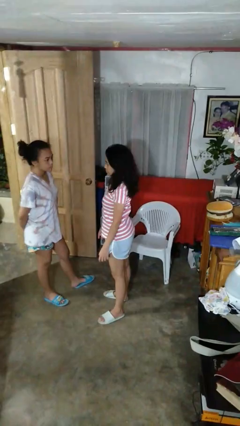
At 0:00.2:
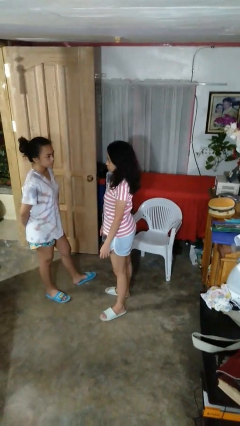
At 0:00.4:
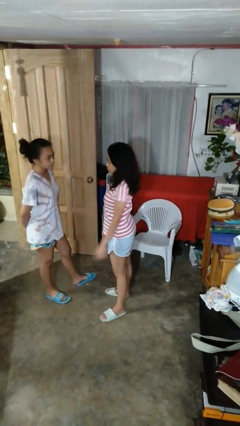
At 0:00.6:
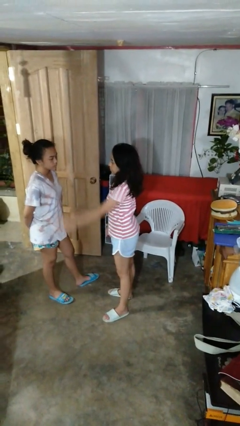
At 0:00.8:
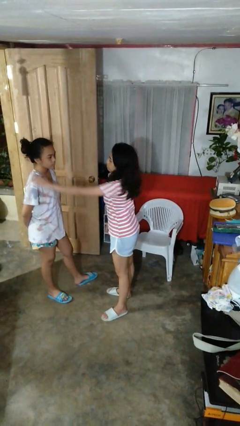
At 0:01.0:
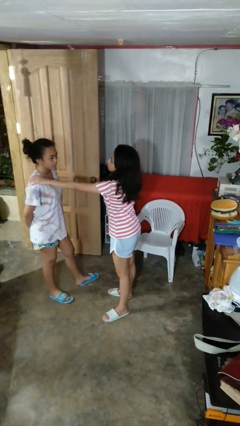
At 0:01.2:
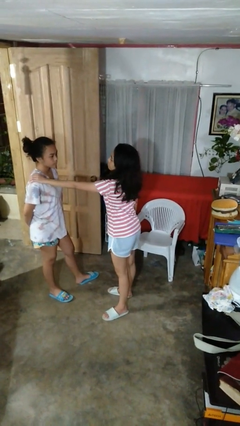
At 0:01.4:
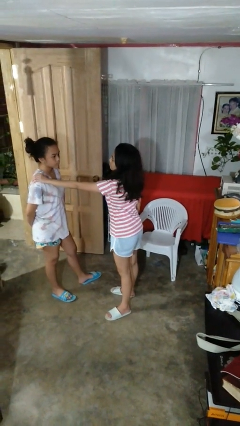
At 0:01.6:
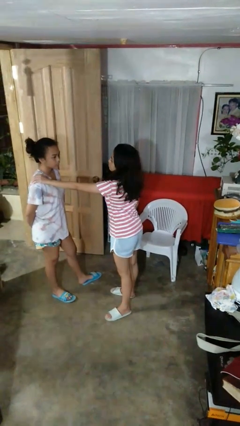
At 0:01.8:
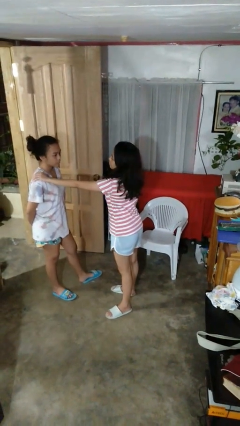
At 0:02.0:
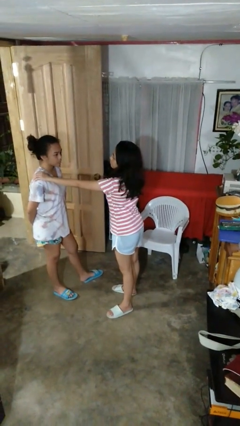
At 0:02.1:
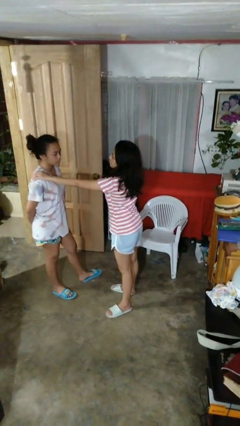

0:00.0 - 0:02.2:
person pounds shoulders of person

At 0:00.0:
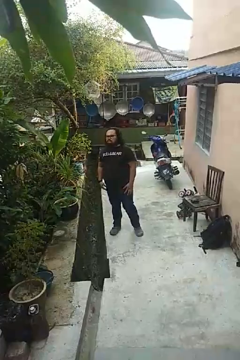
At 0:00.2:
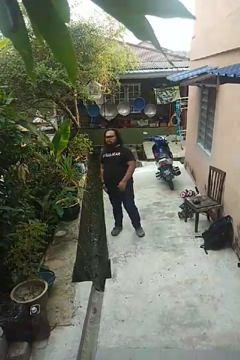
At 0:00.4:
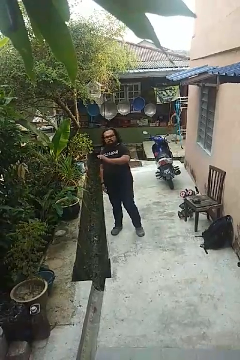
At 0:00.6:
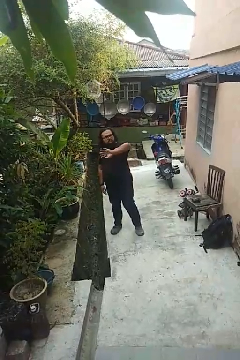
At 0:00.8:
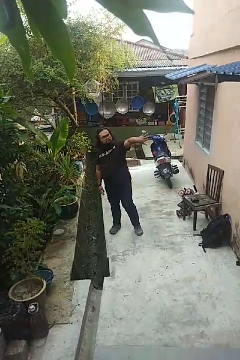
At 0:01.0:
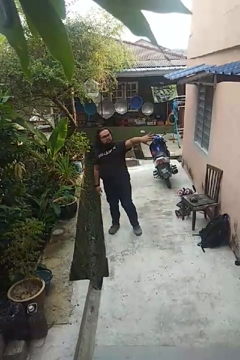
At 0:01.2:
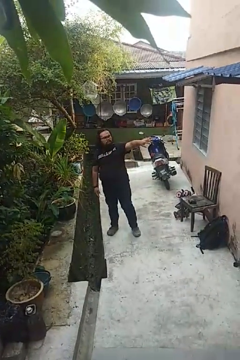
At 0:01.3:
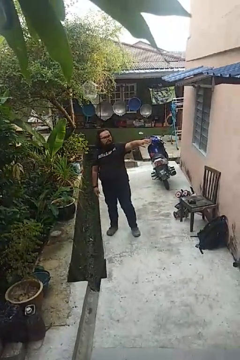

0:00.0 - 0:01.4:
person gestures swipe left

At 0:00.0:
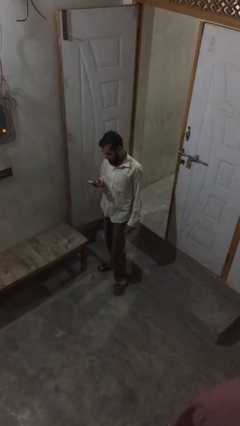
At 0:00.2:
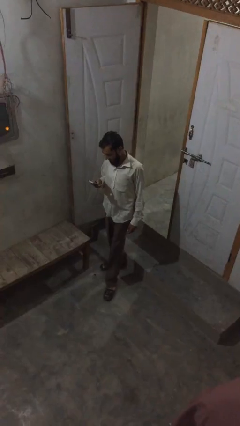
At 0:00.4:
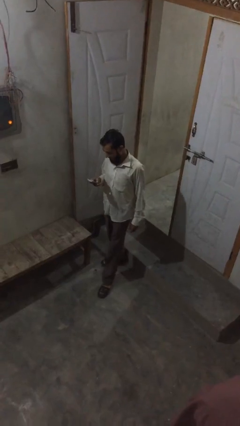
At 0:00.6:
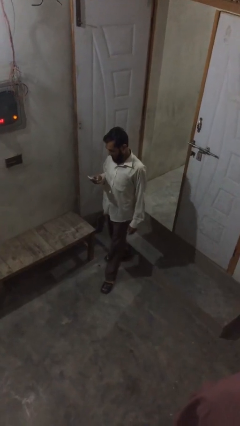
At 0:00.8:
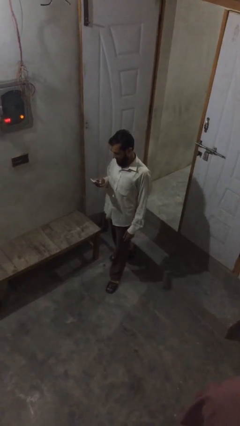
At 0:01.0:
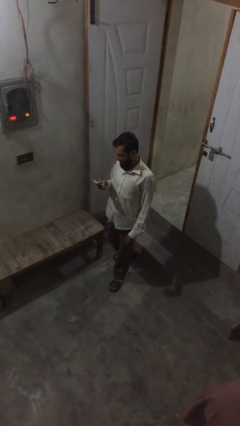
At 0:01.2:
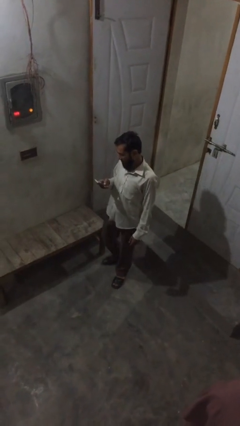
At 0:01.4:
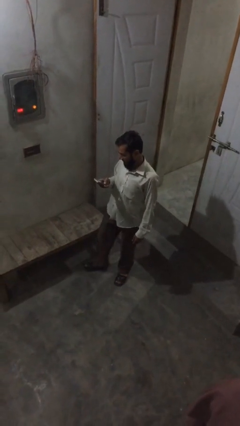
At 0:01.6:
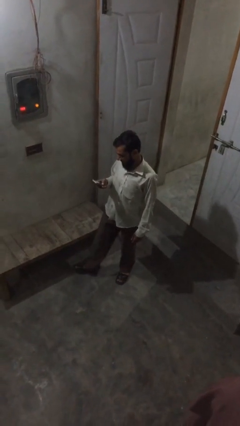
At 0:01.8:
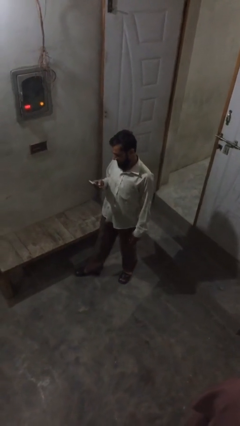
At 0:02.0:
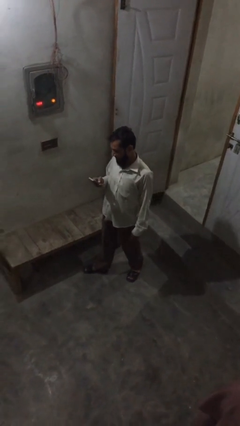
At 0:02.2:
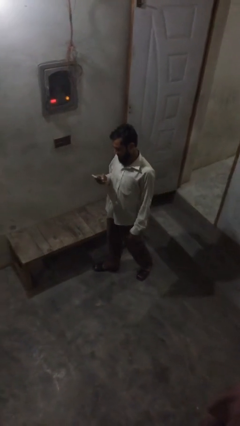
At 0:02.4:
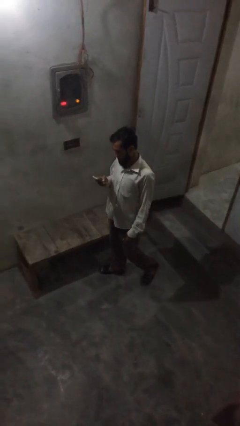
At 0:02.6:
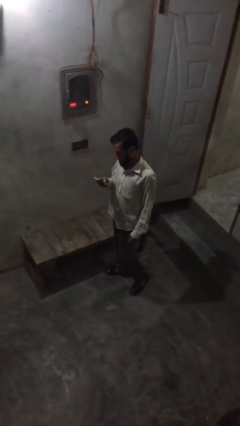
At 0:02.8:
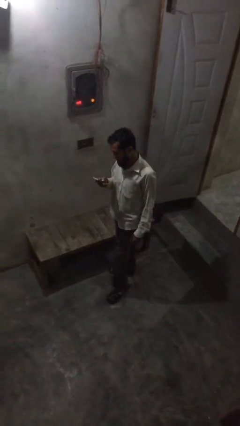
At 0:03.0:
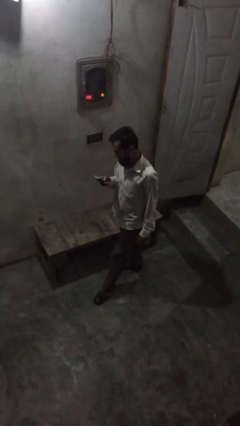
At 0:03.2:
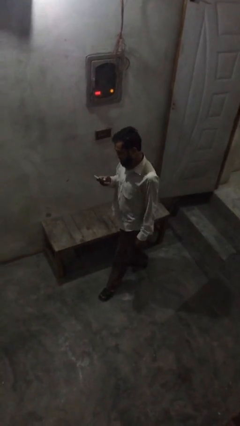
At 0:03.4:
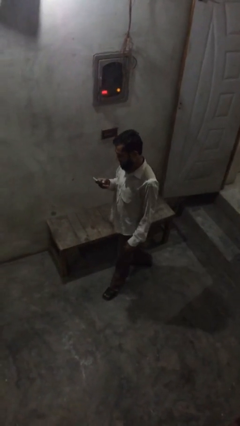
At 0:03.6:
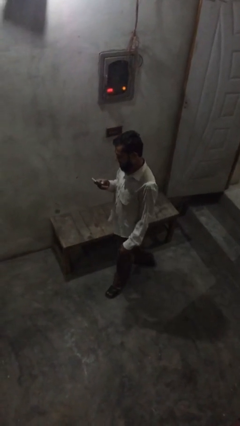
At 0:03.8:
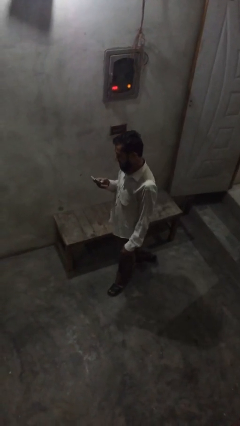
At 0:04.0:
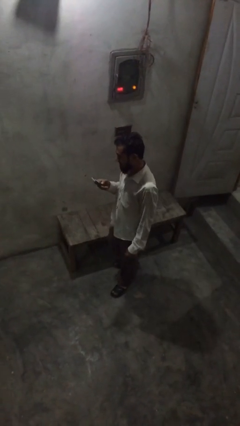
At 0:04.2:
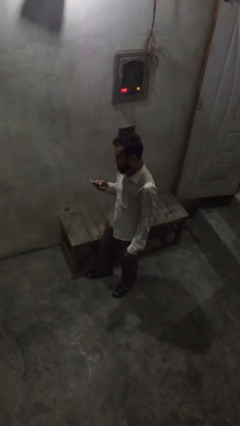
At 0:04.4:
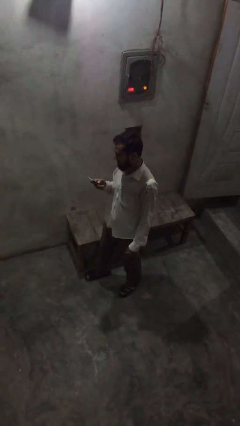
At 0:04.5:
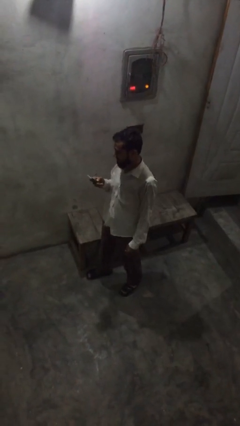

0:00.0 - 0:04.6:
person texts on phone

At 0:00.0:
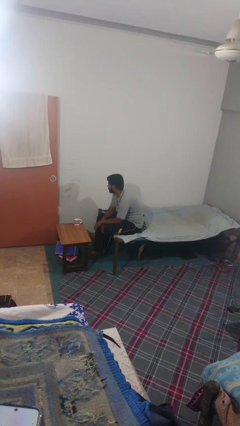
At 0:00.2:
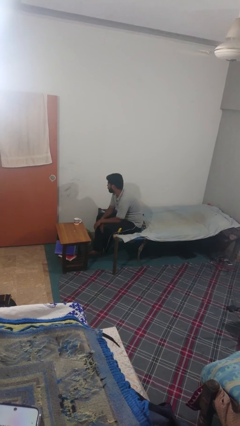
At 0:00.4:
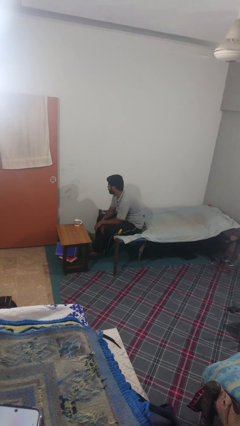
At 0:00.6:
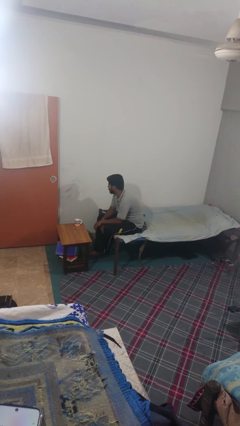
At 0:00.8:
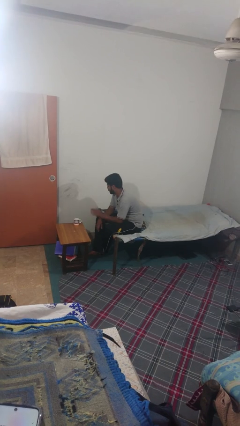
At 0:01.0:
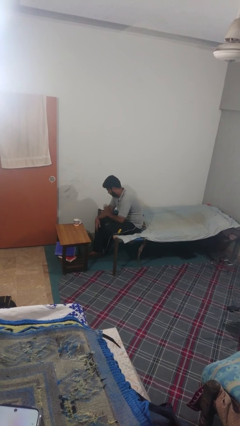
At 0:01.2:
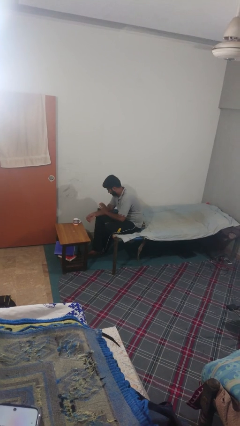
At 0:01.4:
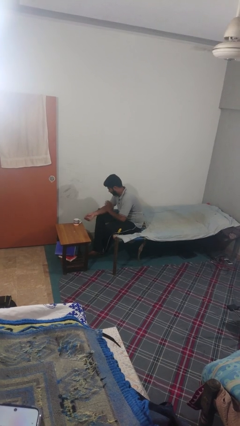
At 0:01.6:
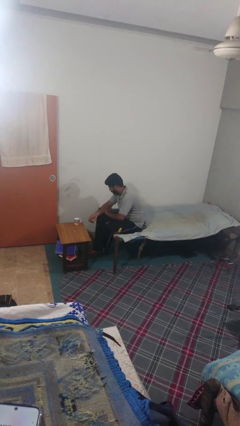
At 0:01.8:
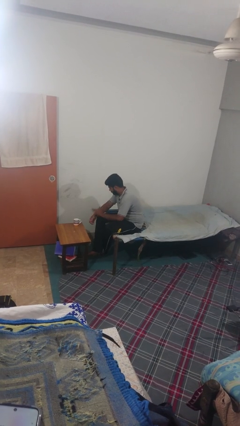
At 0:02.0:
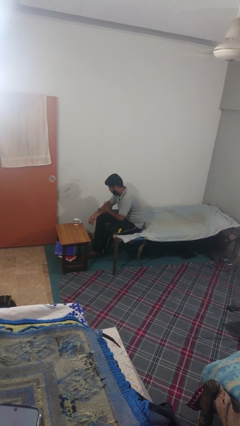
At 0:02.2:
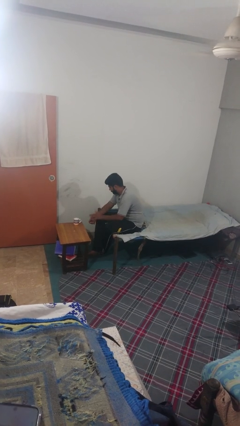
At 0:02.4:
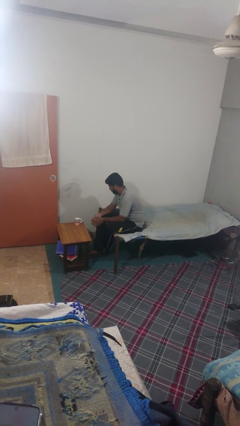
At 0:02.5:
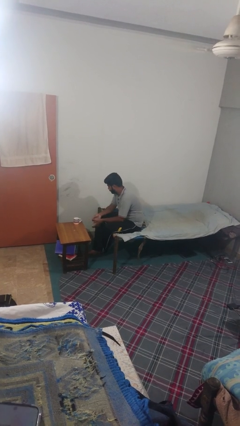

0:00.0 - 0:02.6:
person swats bug

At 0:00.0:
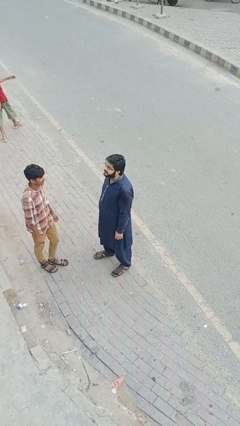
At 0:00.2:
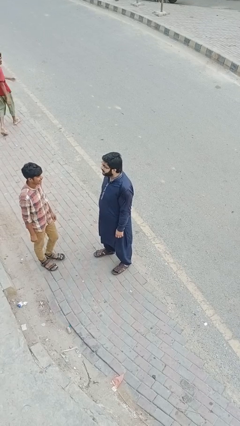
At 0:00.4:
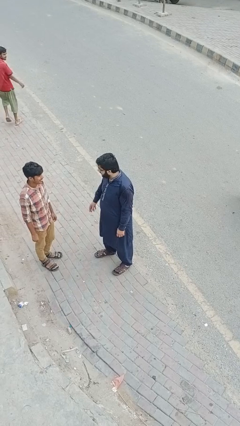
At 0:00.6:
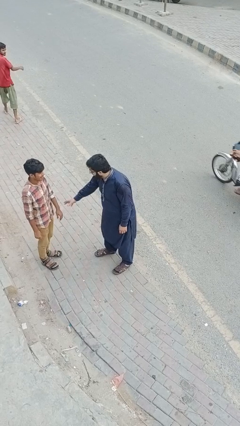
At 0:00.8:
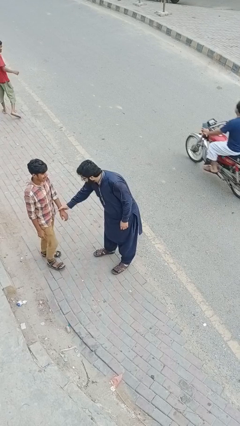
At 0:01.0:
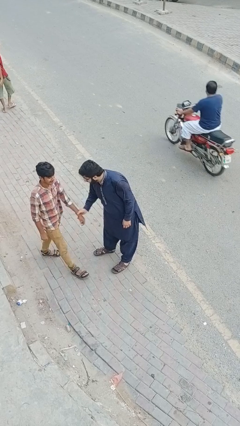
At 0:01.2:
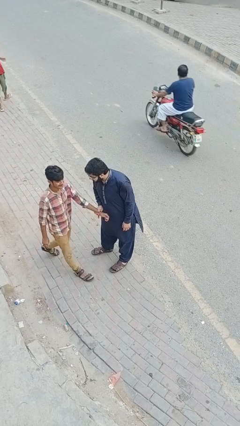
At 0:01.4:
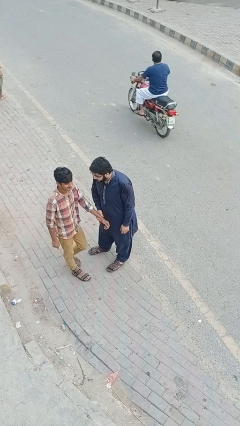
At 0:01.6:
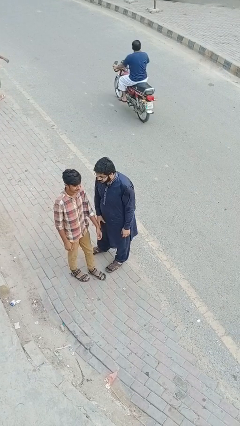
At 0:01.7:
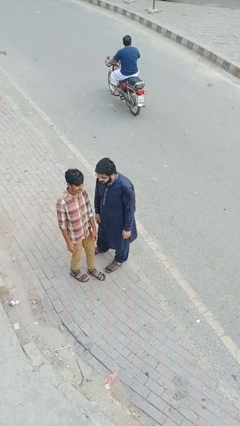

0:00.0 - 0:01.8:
person grabs person by forearm

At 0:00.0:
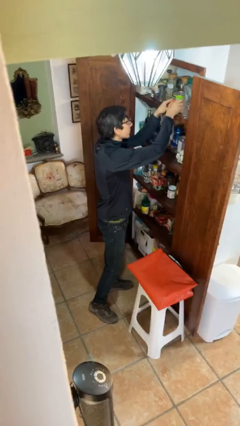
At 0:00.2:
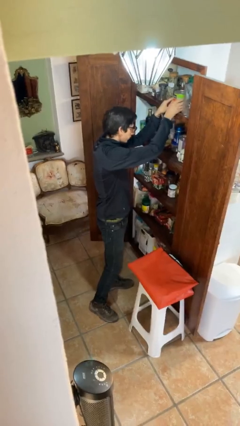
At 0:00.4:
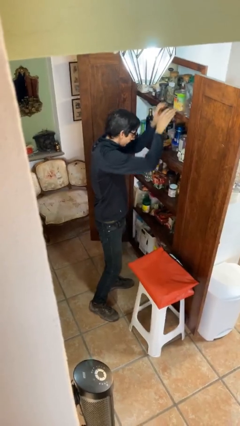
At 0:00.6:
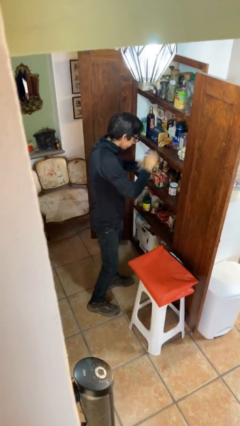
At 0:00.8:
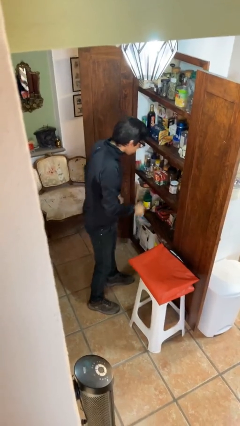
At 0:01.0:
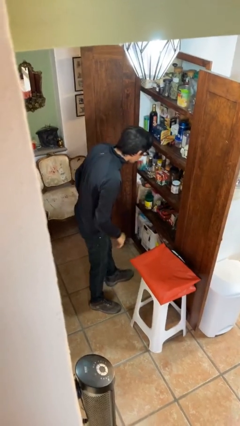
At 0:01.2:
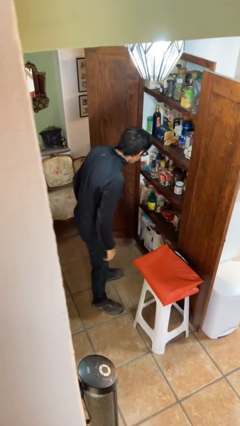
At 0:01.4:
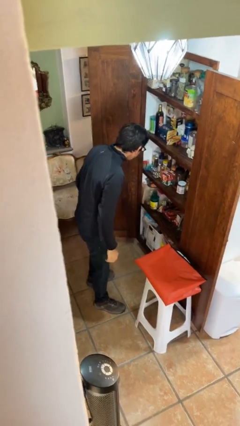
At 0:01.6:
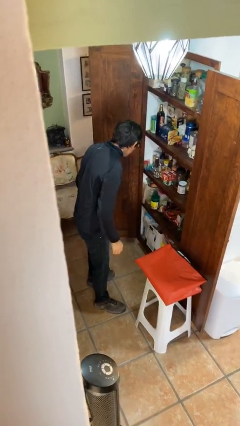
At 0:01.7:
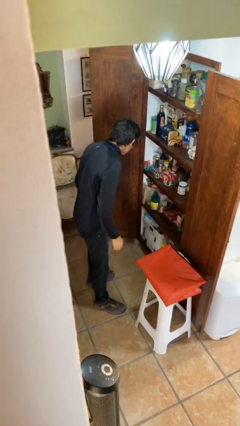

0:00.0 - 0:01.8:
person puts down object on shelf

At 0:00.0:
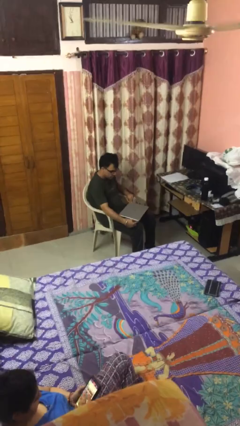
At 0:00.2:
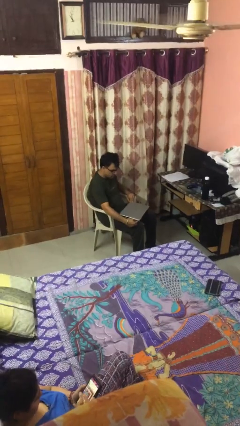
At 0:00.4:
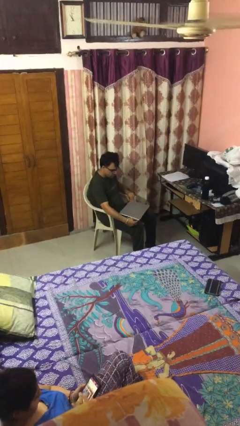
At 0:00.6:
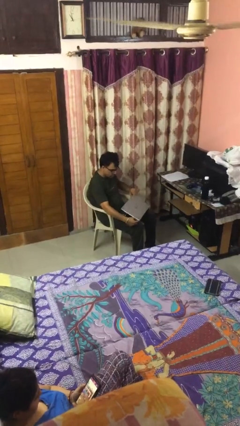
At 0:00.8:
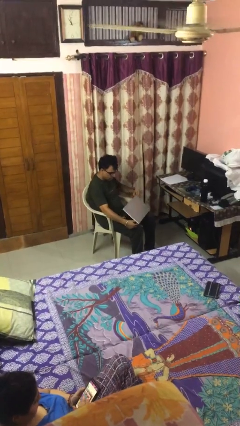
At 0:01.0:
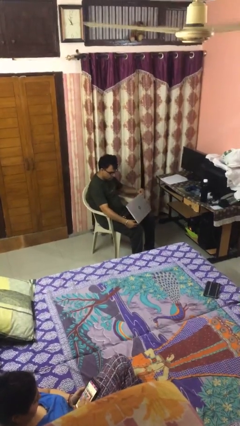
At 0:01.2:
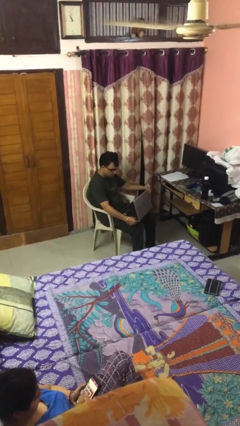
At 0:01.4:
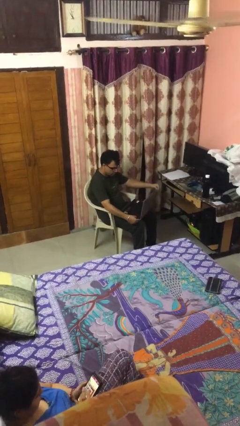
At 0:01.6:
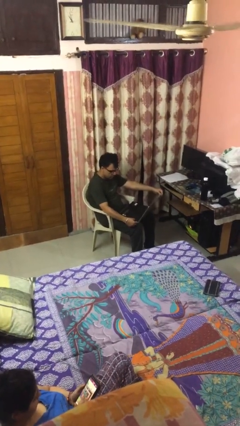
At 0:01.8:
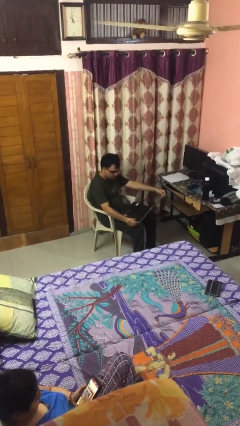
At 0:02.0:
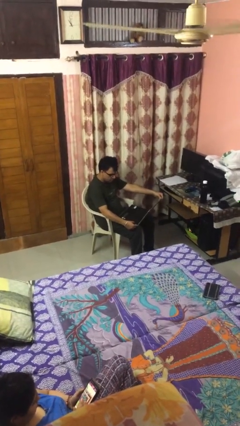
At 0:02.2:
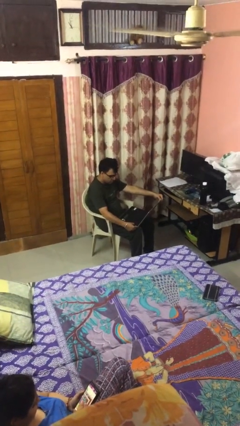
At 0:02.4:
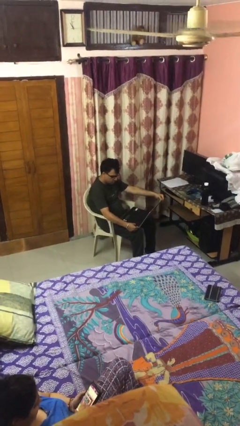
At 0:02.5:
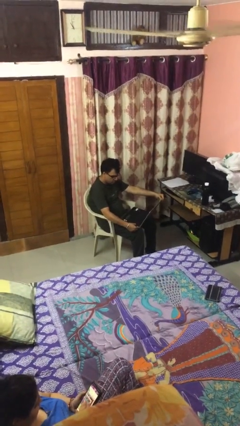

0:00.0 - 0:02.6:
person opens laptop
